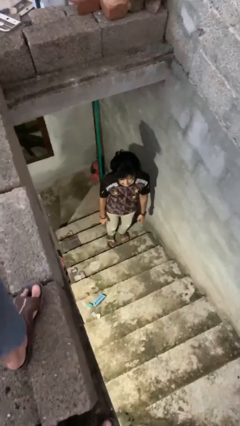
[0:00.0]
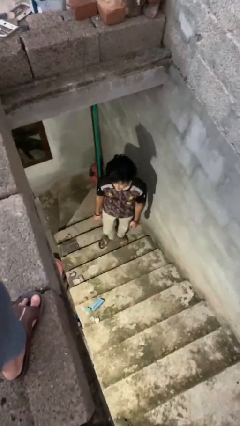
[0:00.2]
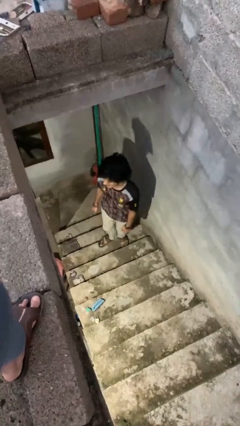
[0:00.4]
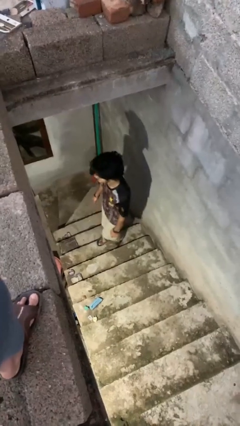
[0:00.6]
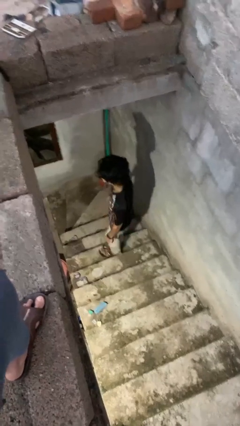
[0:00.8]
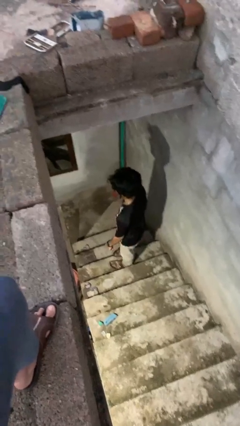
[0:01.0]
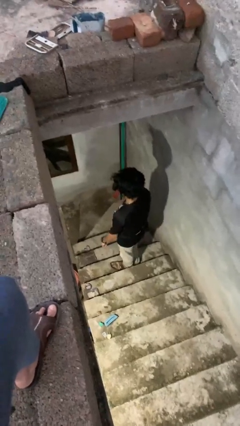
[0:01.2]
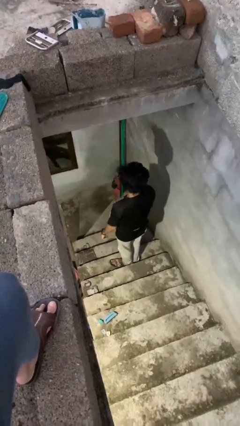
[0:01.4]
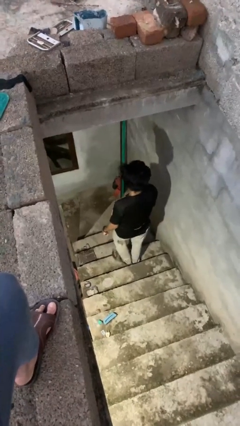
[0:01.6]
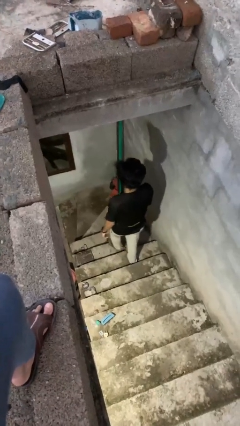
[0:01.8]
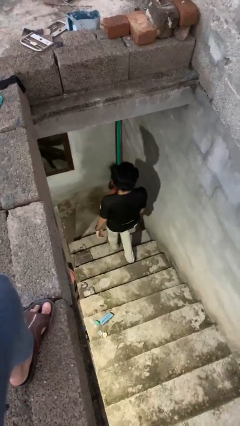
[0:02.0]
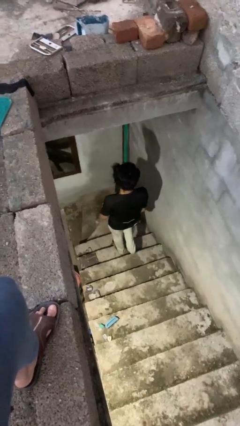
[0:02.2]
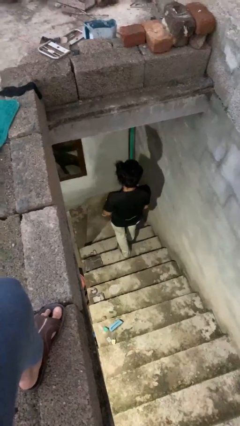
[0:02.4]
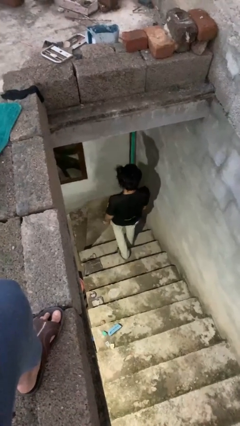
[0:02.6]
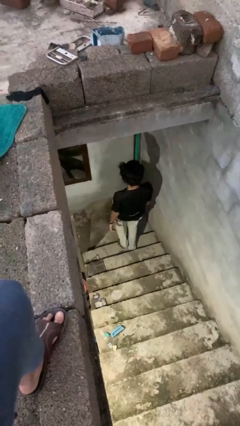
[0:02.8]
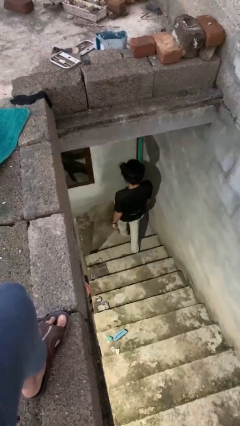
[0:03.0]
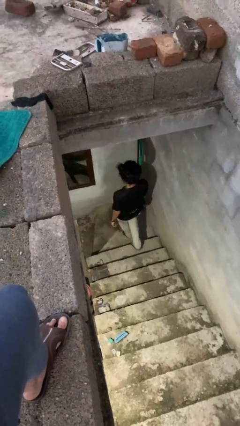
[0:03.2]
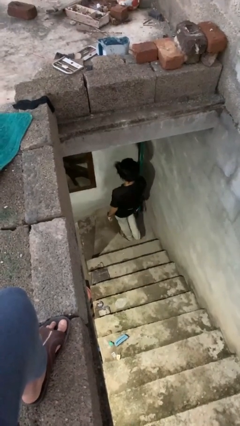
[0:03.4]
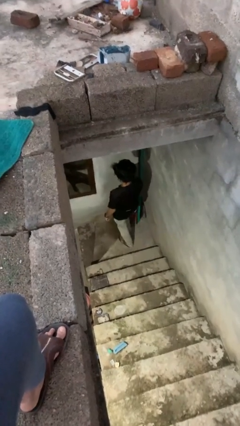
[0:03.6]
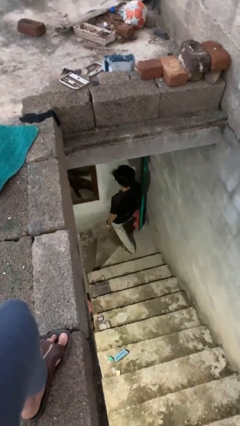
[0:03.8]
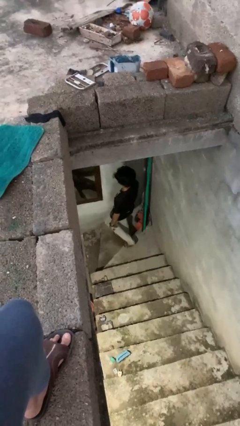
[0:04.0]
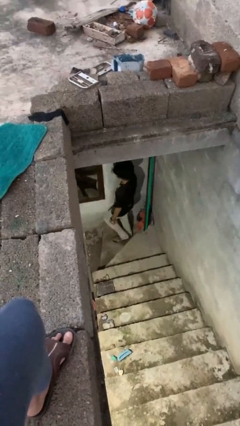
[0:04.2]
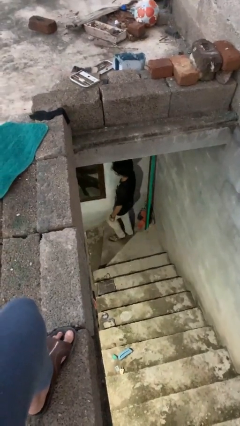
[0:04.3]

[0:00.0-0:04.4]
person climbs down stairs

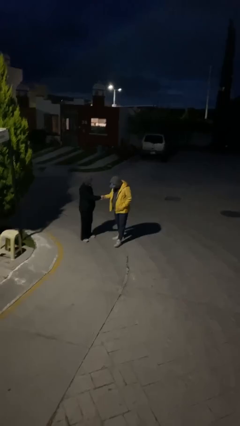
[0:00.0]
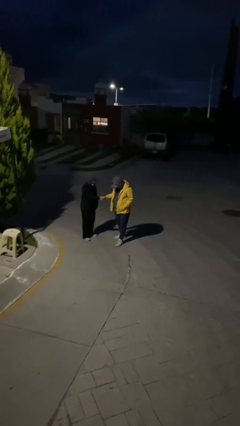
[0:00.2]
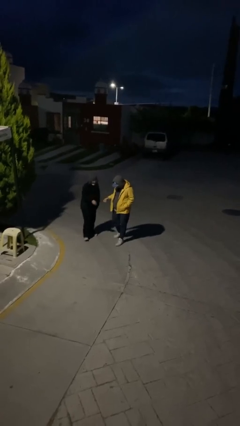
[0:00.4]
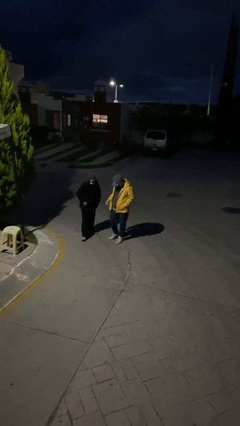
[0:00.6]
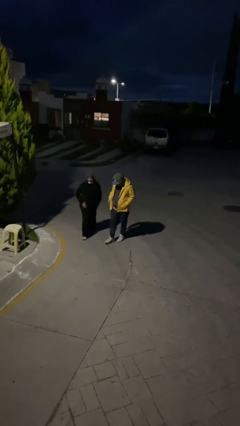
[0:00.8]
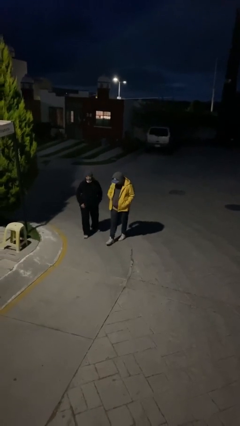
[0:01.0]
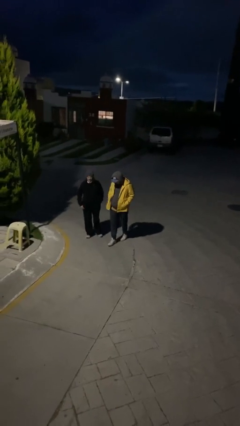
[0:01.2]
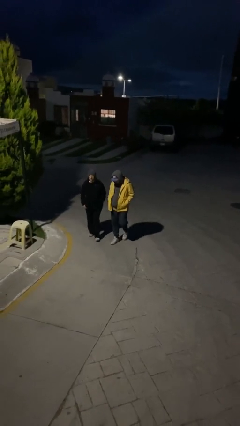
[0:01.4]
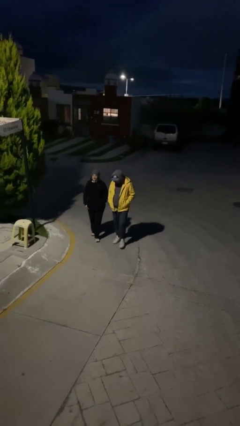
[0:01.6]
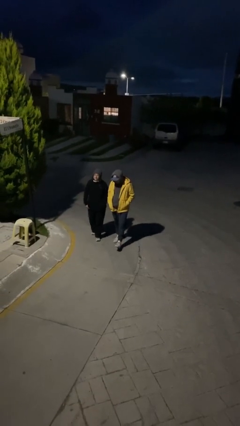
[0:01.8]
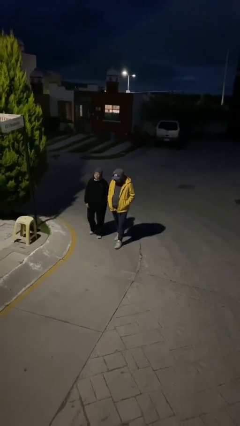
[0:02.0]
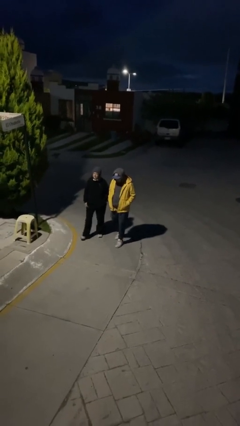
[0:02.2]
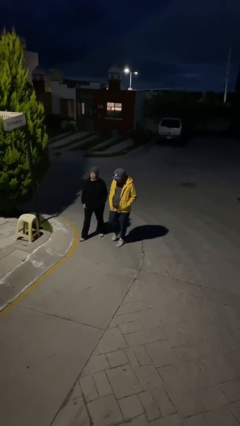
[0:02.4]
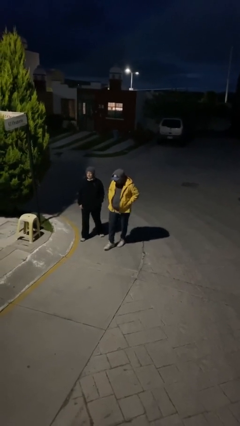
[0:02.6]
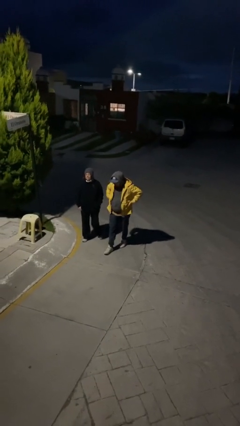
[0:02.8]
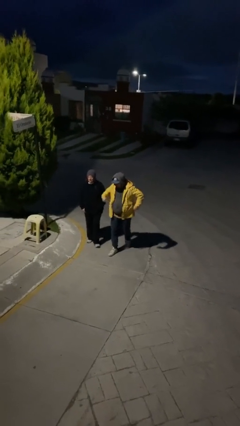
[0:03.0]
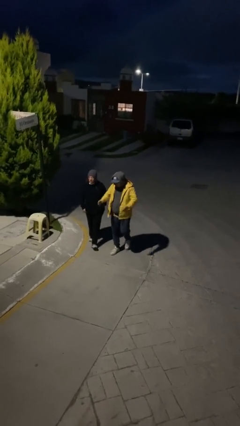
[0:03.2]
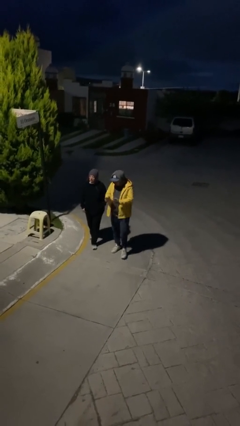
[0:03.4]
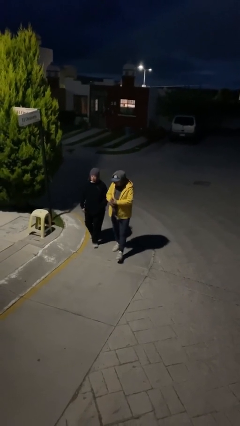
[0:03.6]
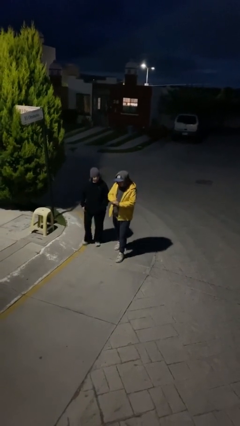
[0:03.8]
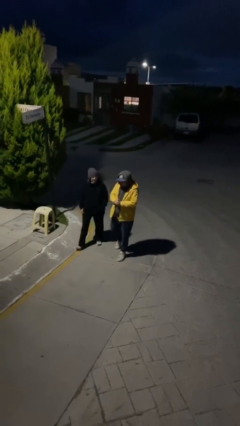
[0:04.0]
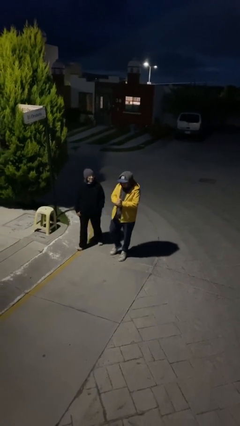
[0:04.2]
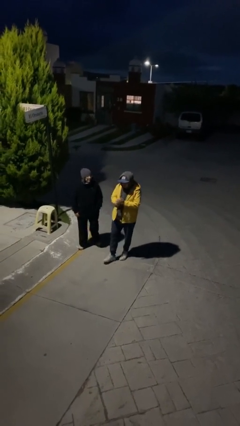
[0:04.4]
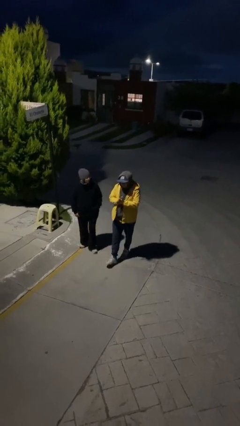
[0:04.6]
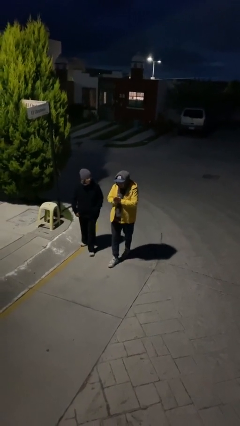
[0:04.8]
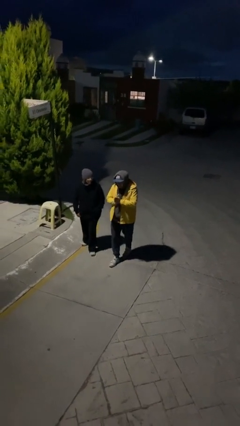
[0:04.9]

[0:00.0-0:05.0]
person talks to person

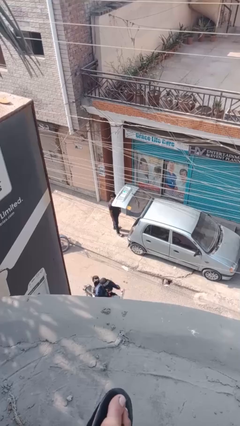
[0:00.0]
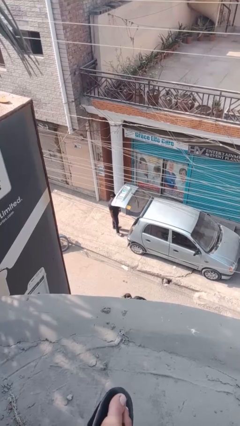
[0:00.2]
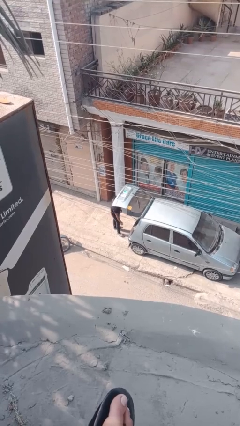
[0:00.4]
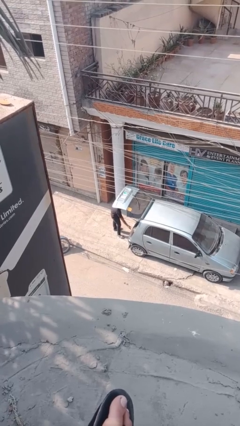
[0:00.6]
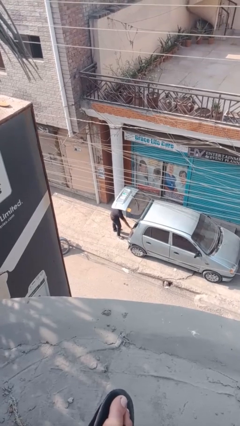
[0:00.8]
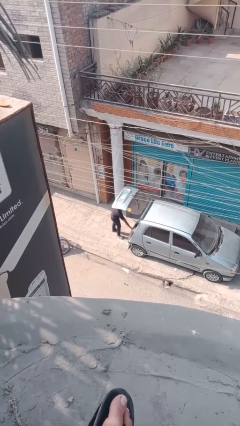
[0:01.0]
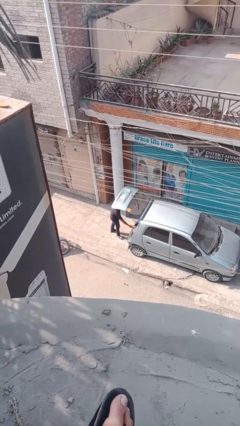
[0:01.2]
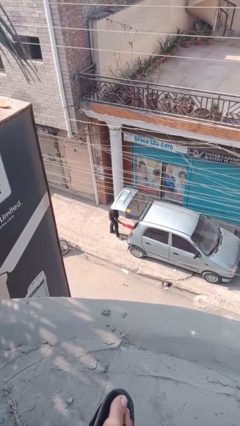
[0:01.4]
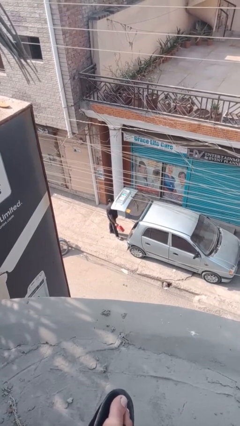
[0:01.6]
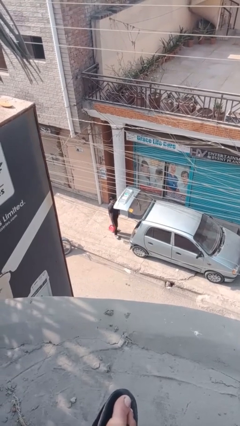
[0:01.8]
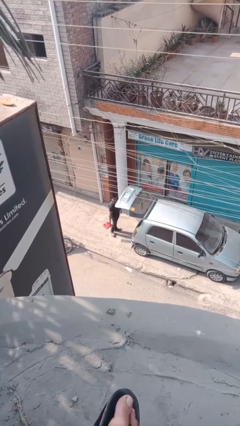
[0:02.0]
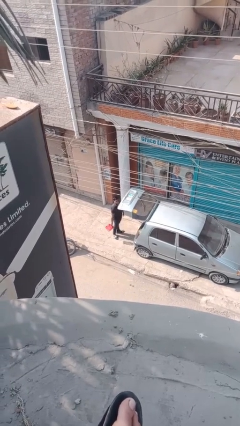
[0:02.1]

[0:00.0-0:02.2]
person unloads car

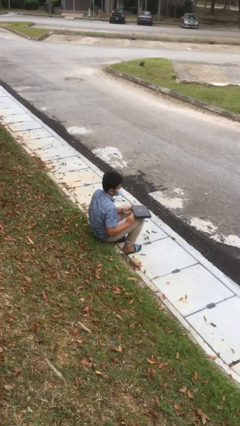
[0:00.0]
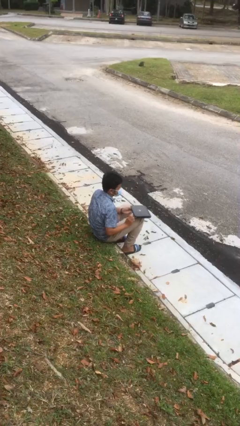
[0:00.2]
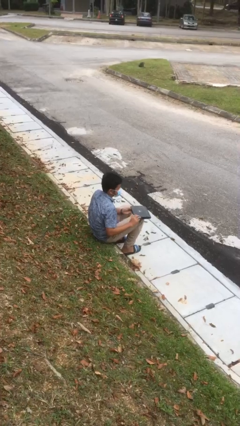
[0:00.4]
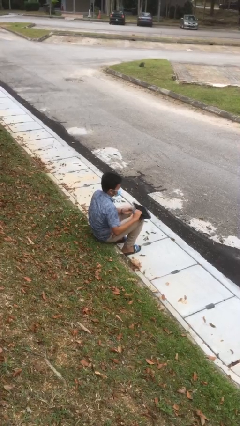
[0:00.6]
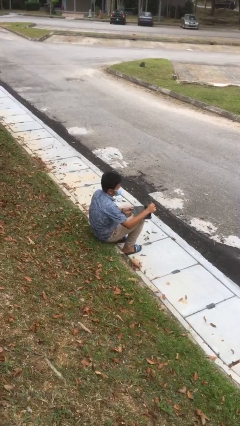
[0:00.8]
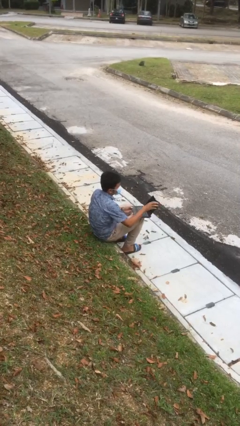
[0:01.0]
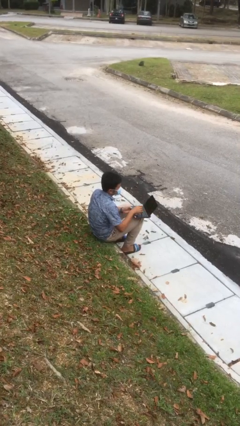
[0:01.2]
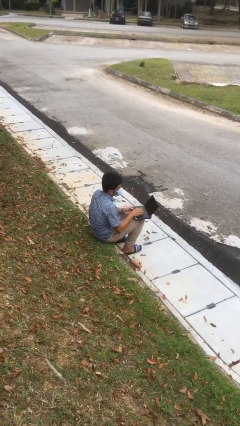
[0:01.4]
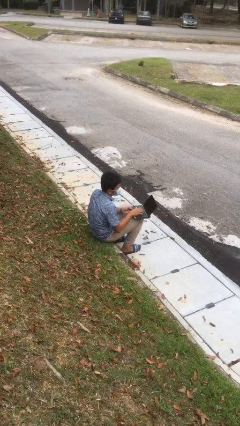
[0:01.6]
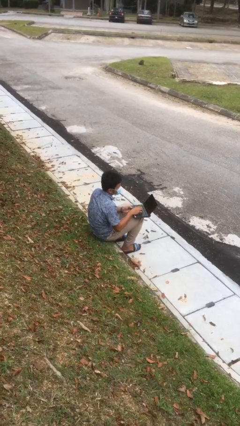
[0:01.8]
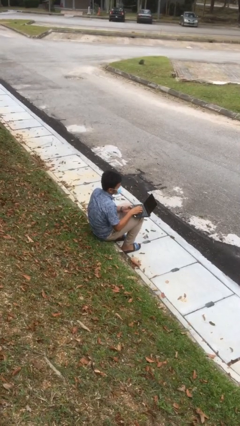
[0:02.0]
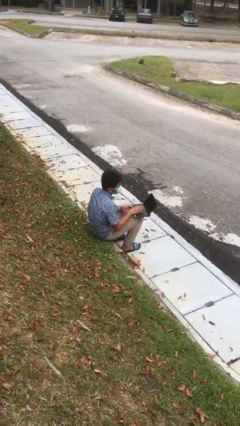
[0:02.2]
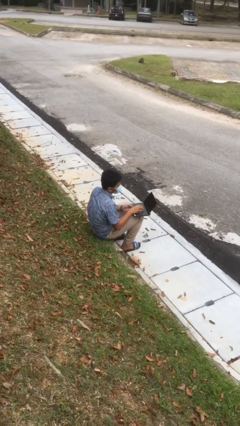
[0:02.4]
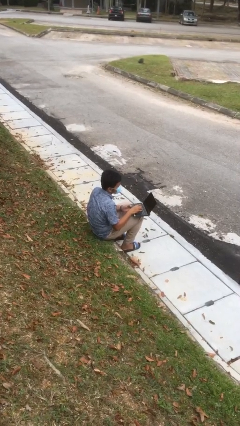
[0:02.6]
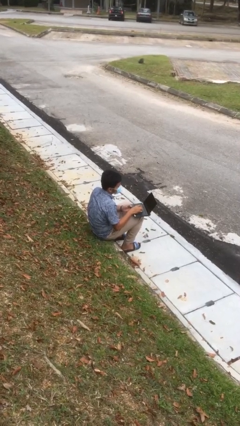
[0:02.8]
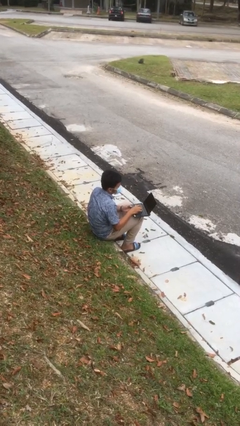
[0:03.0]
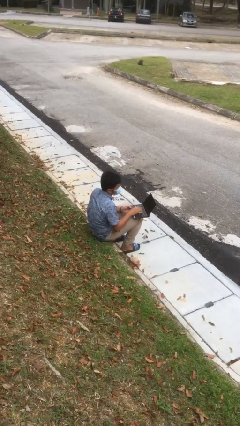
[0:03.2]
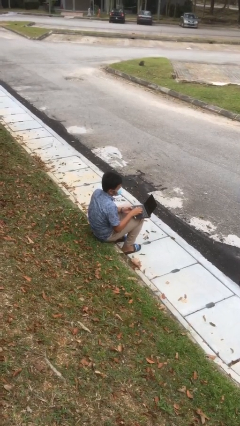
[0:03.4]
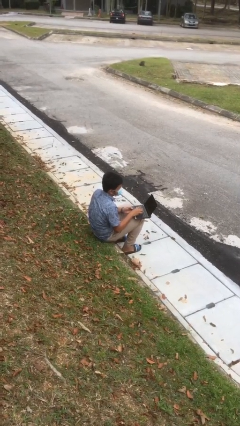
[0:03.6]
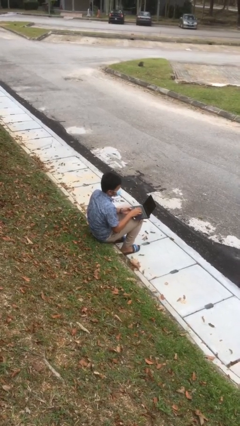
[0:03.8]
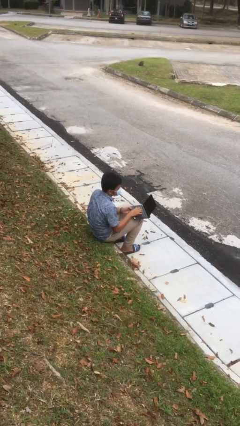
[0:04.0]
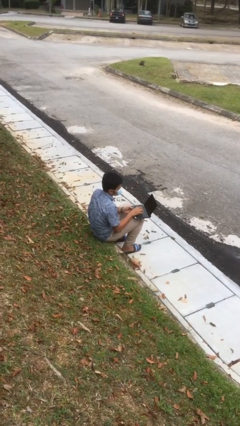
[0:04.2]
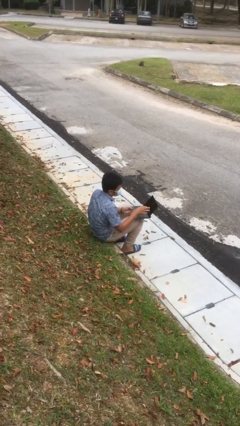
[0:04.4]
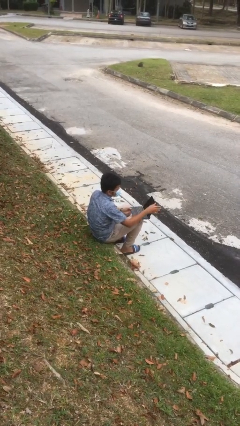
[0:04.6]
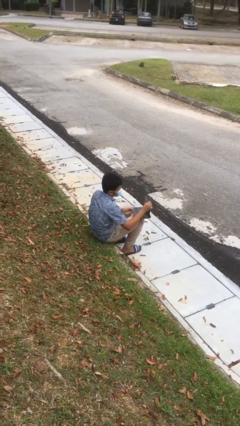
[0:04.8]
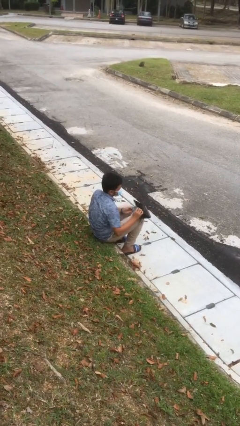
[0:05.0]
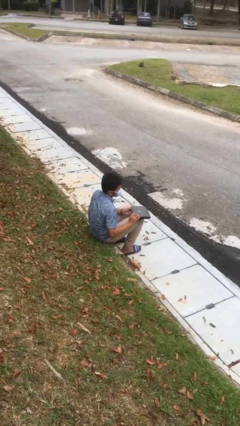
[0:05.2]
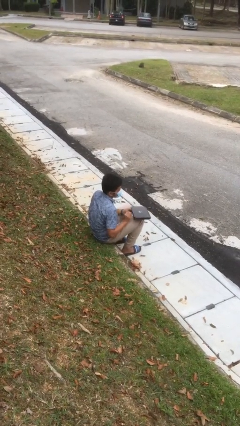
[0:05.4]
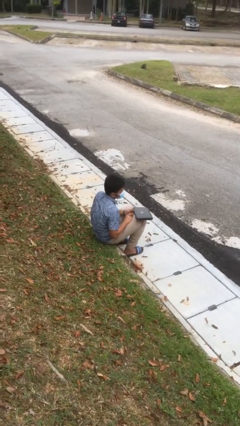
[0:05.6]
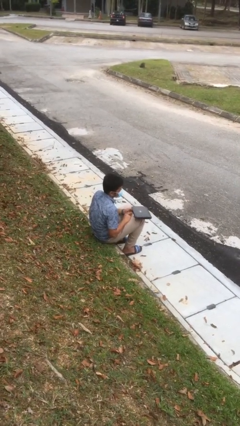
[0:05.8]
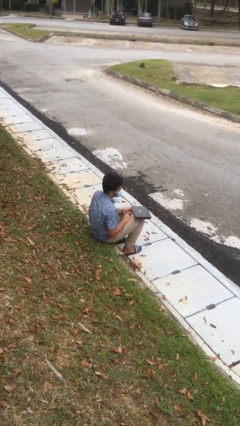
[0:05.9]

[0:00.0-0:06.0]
person interacts with laptop
